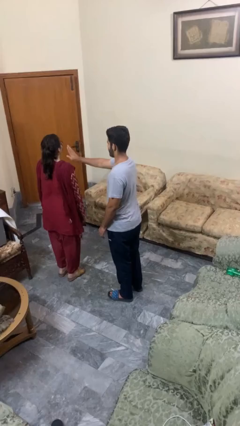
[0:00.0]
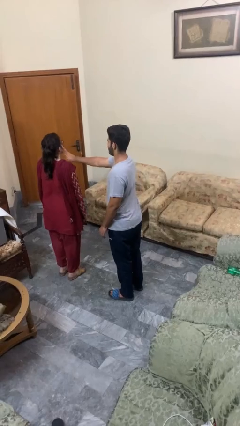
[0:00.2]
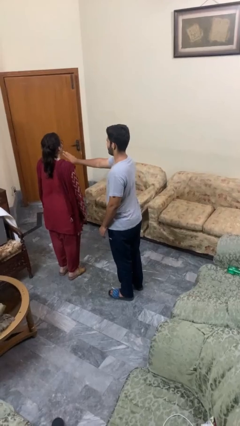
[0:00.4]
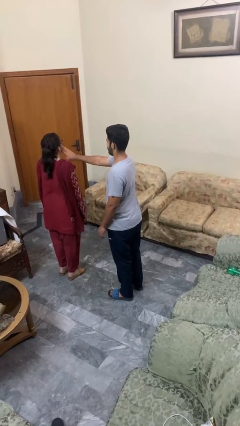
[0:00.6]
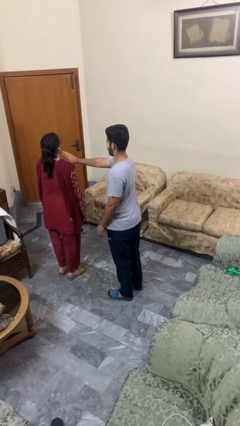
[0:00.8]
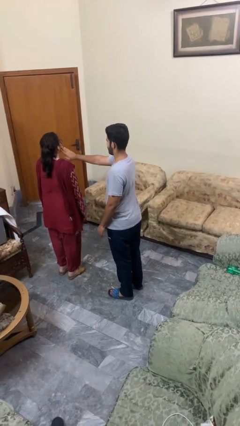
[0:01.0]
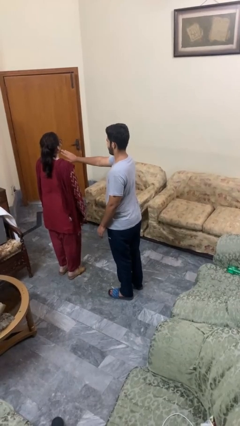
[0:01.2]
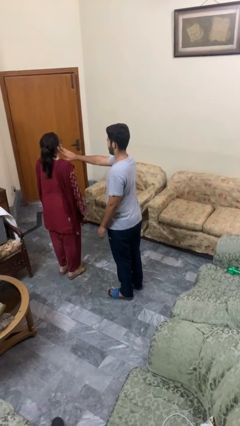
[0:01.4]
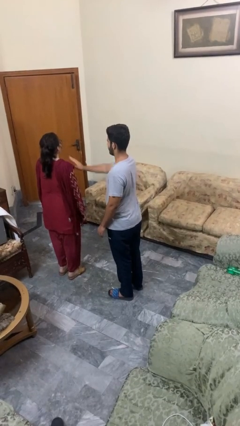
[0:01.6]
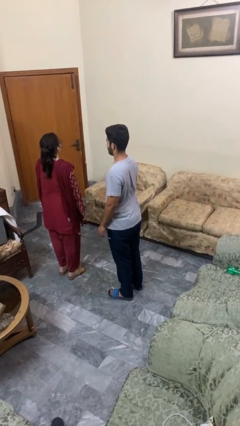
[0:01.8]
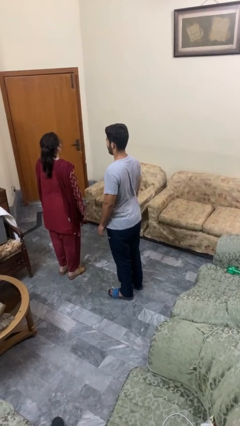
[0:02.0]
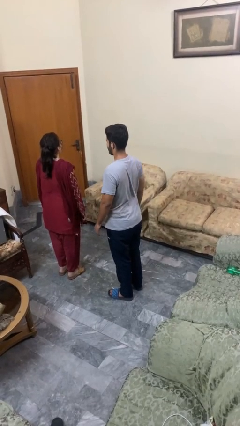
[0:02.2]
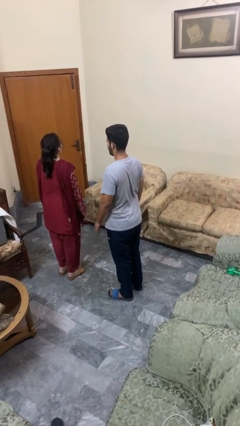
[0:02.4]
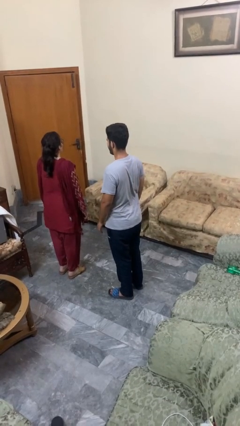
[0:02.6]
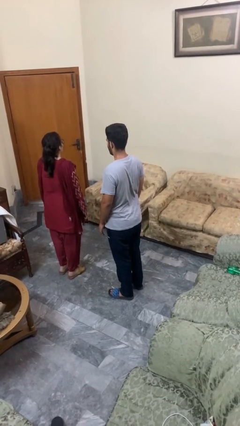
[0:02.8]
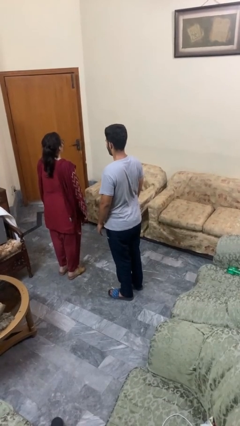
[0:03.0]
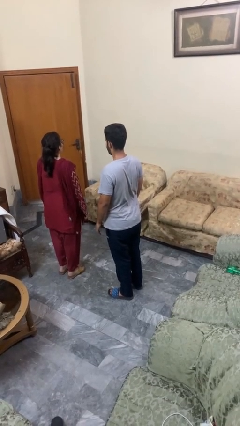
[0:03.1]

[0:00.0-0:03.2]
person touches face of person

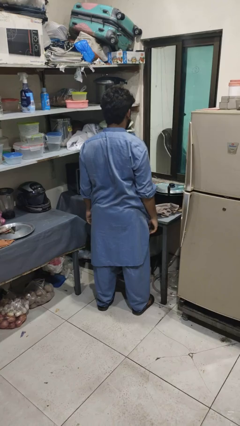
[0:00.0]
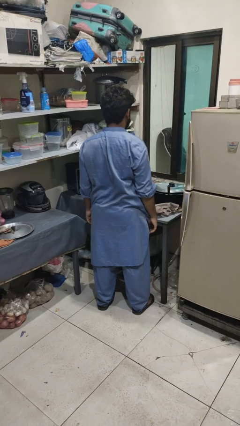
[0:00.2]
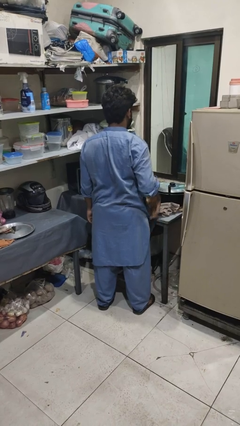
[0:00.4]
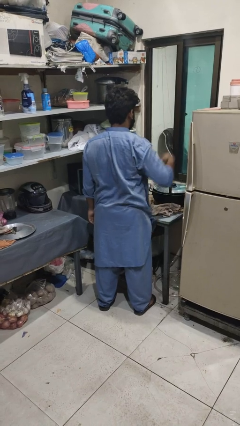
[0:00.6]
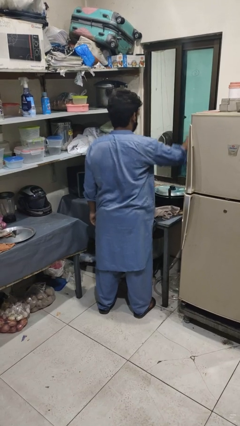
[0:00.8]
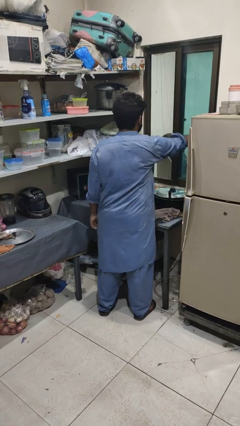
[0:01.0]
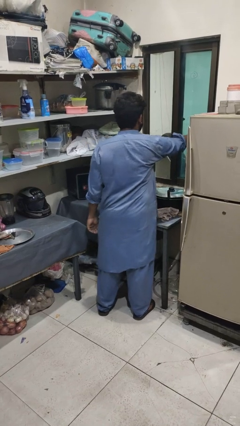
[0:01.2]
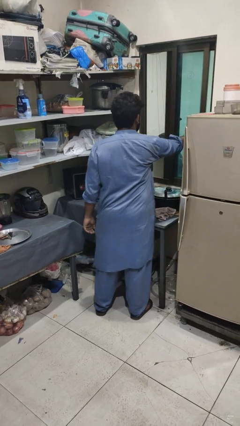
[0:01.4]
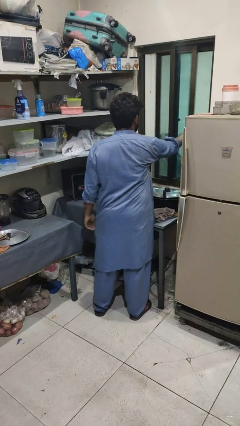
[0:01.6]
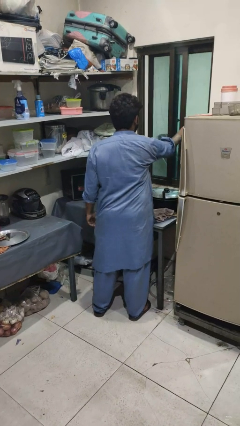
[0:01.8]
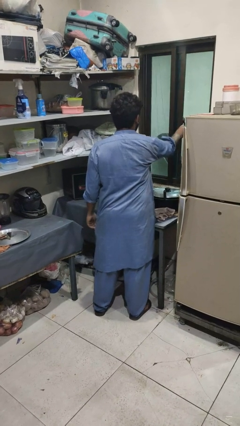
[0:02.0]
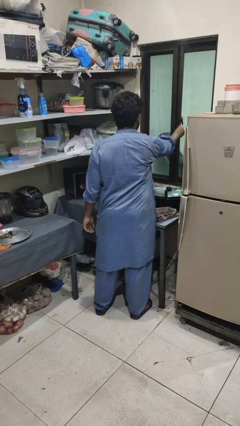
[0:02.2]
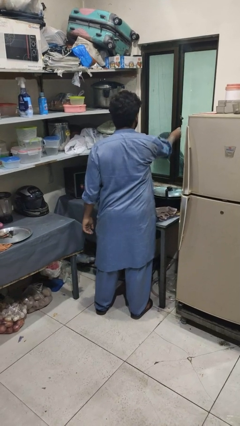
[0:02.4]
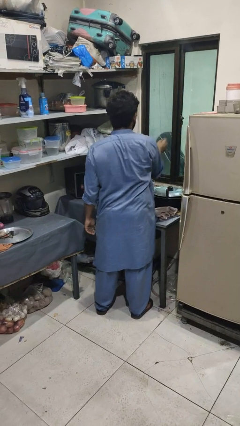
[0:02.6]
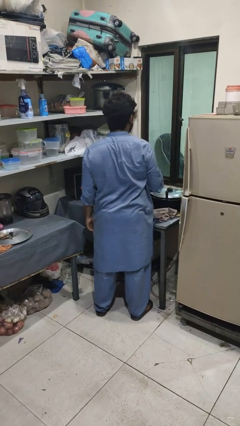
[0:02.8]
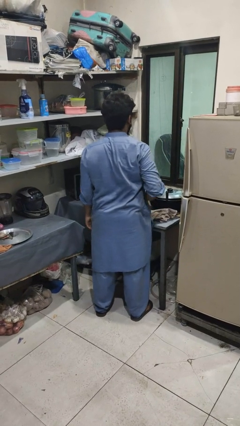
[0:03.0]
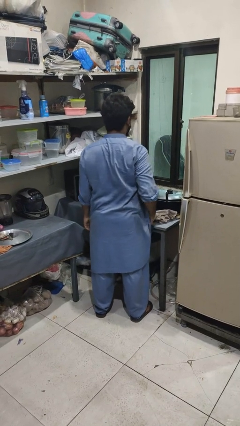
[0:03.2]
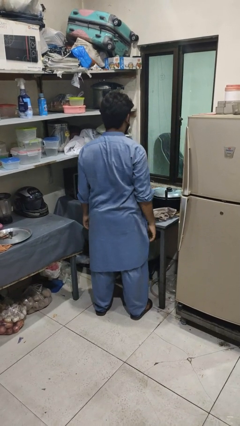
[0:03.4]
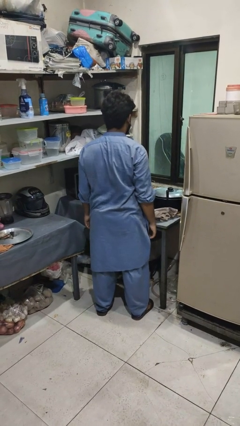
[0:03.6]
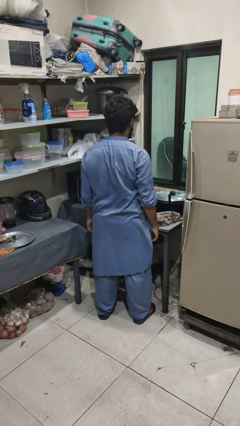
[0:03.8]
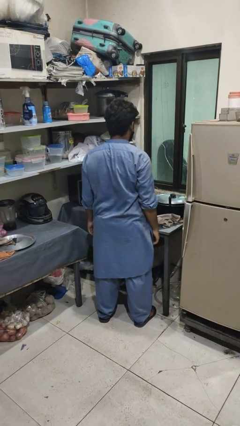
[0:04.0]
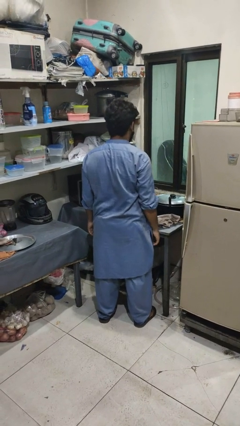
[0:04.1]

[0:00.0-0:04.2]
person closes home window

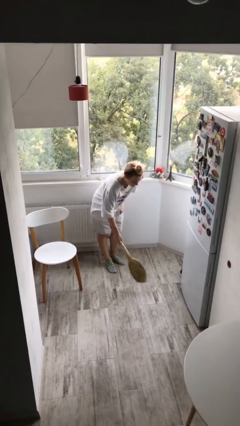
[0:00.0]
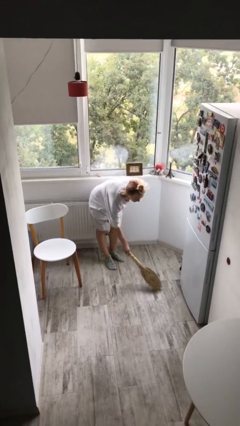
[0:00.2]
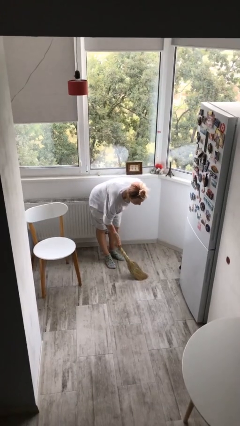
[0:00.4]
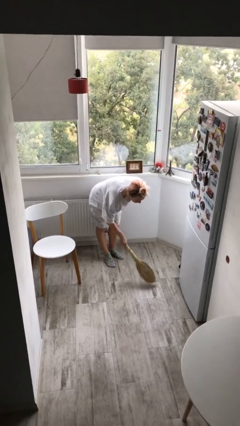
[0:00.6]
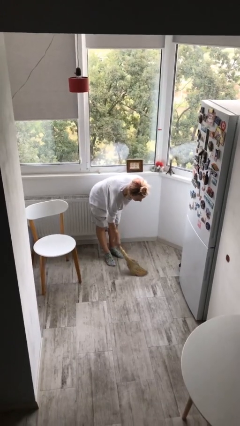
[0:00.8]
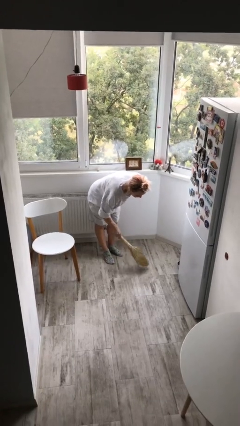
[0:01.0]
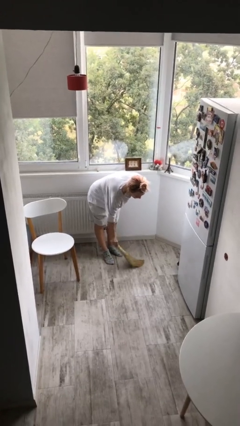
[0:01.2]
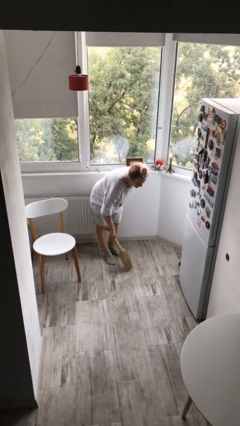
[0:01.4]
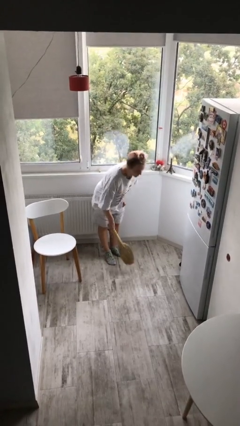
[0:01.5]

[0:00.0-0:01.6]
person sweeps floor

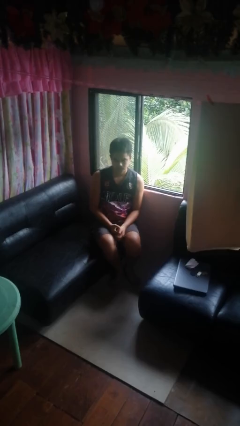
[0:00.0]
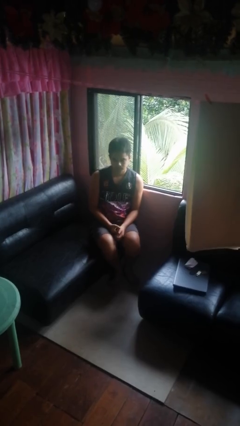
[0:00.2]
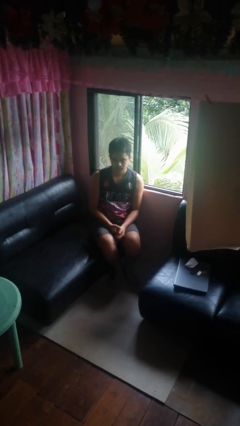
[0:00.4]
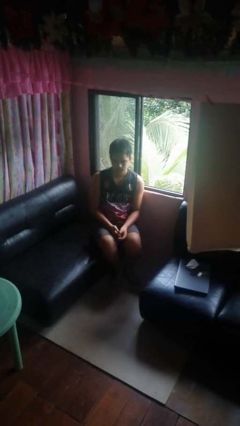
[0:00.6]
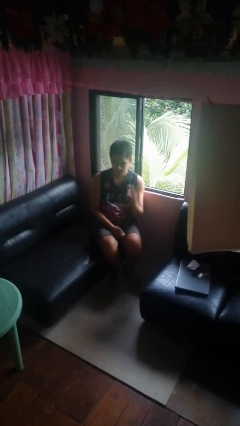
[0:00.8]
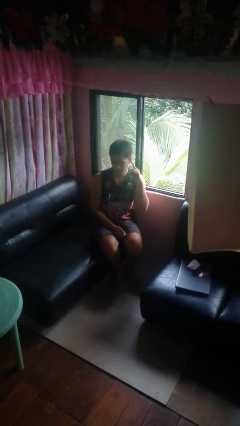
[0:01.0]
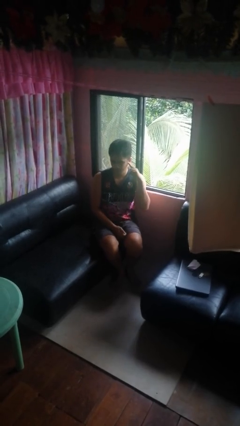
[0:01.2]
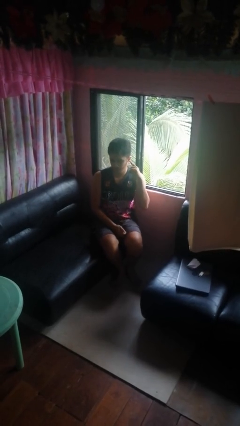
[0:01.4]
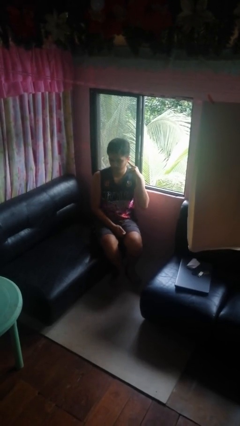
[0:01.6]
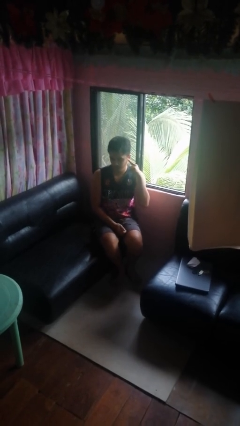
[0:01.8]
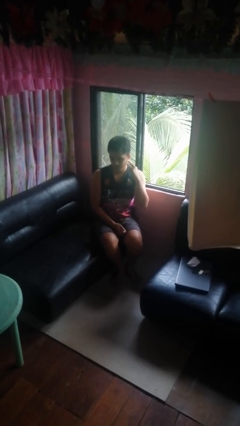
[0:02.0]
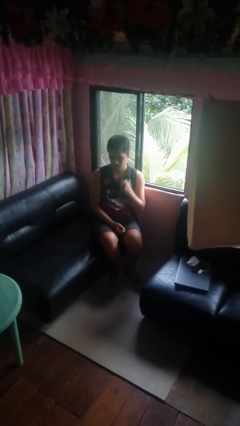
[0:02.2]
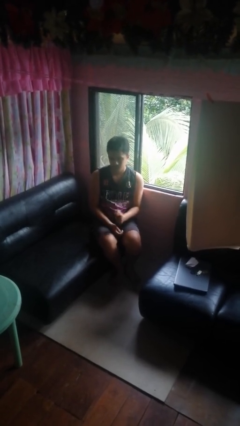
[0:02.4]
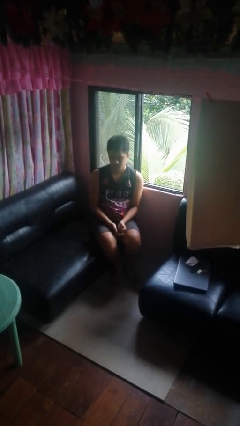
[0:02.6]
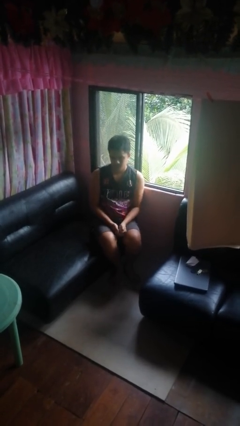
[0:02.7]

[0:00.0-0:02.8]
person gestures listen closely

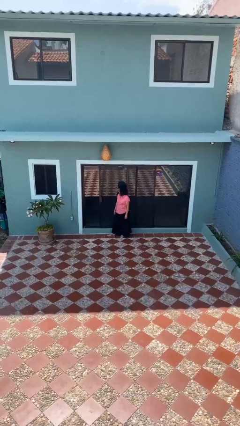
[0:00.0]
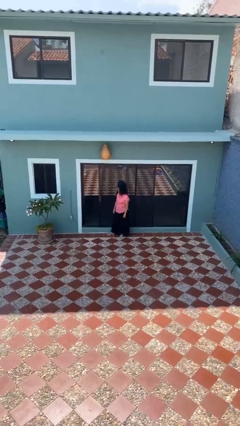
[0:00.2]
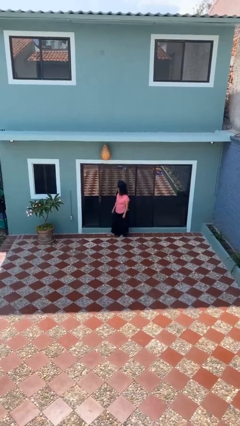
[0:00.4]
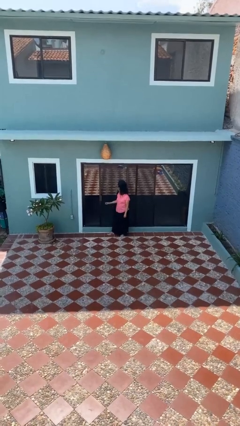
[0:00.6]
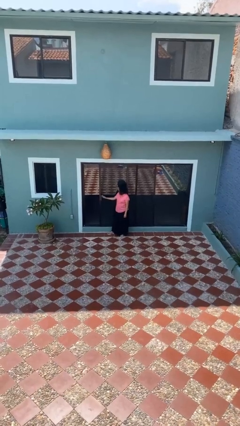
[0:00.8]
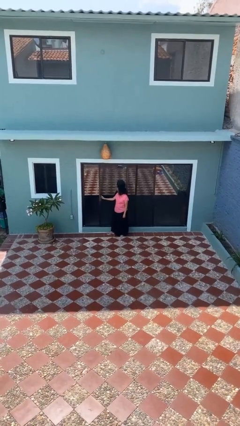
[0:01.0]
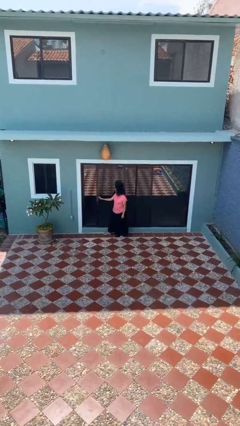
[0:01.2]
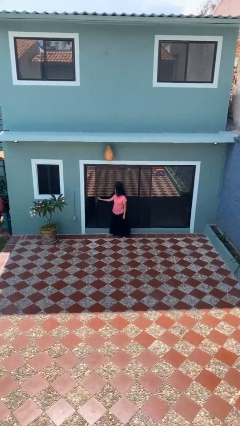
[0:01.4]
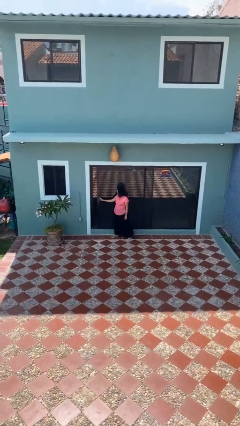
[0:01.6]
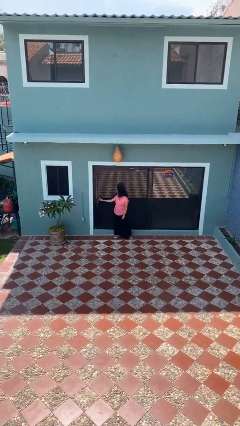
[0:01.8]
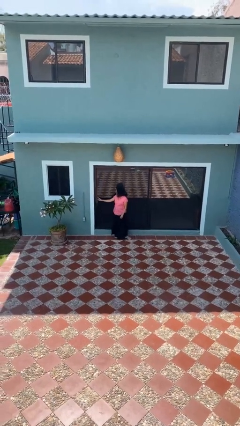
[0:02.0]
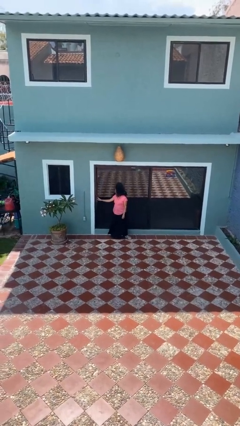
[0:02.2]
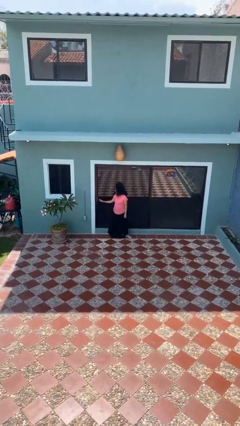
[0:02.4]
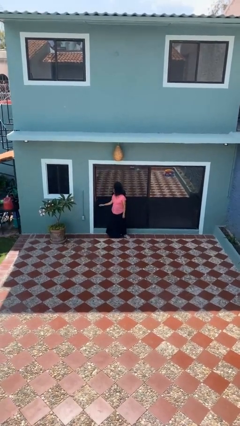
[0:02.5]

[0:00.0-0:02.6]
person closes sliding door

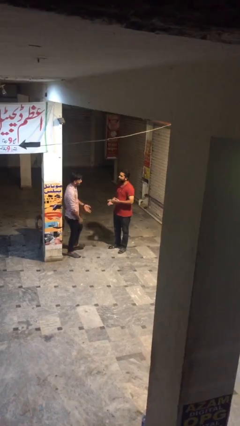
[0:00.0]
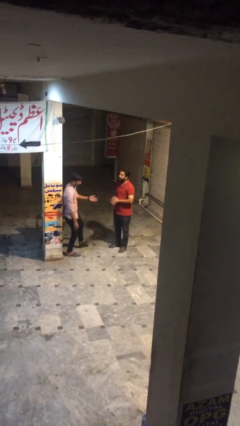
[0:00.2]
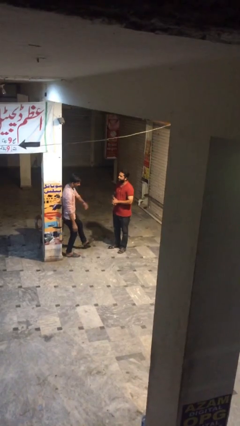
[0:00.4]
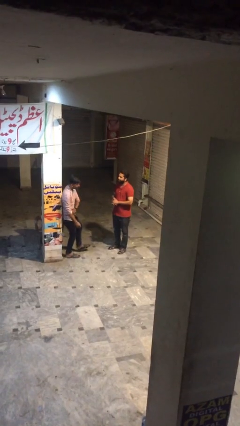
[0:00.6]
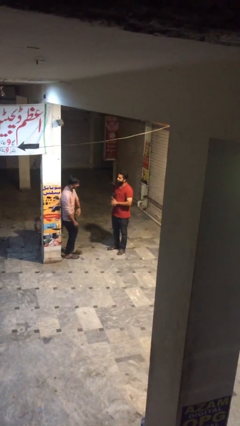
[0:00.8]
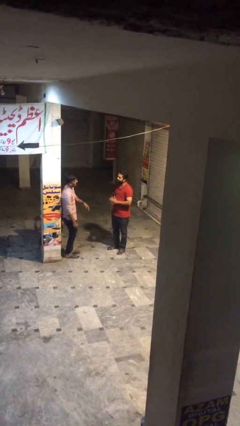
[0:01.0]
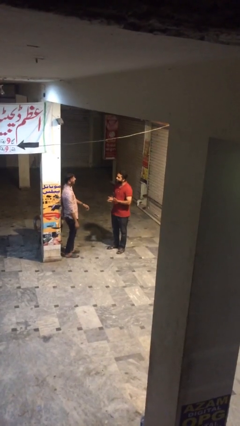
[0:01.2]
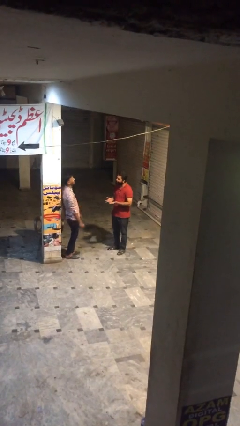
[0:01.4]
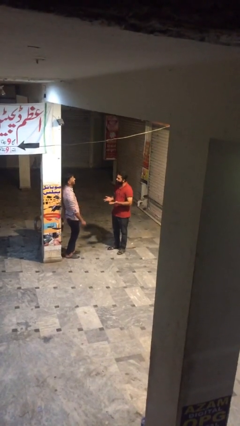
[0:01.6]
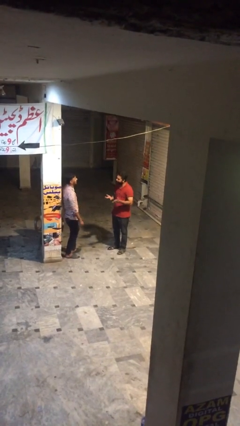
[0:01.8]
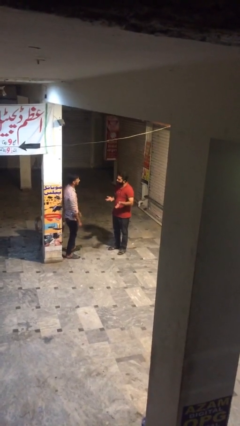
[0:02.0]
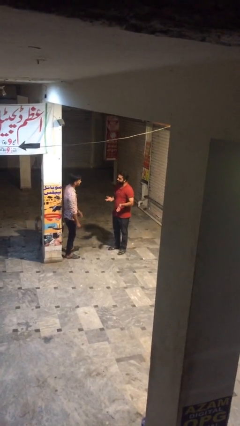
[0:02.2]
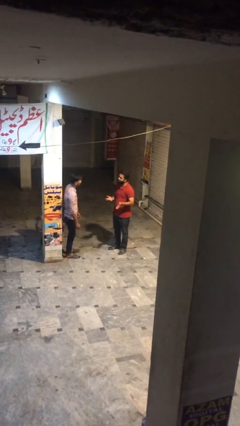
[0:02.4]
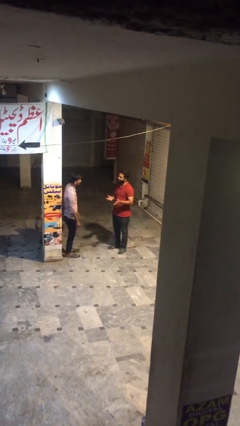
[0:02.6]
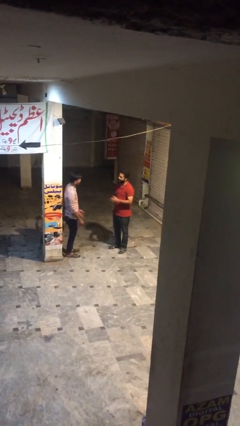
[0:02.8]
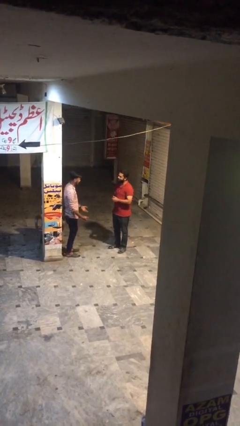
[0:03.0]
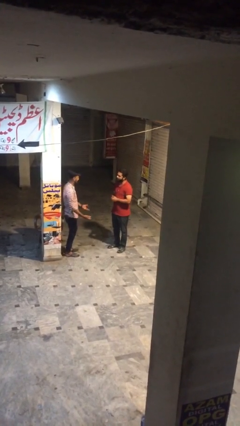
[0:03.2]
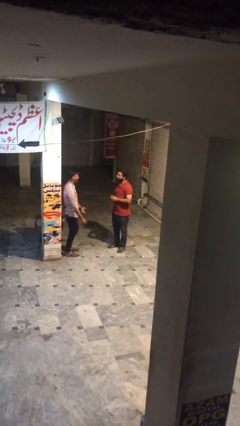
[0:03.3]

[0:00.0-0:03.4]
person talks to person
